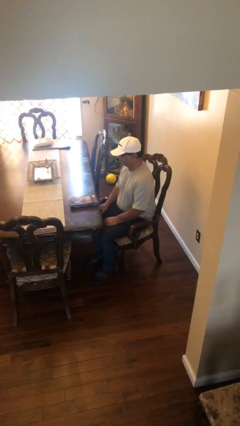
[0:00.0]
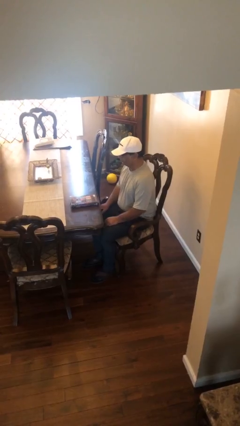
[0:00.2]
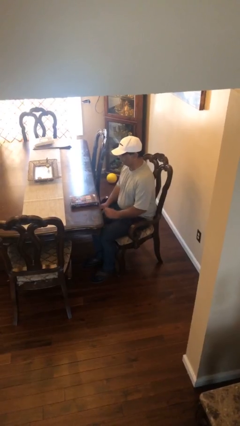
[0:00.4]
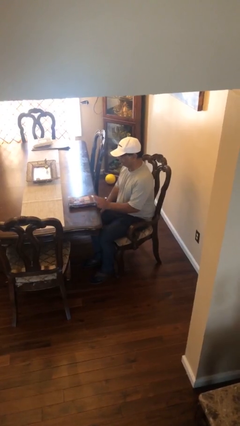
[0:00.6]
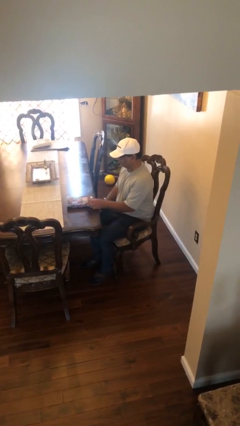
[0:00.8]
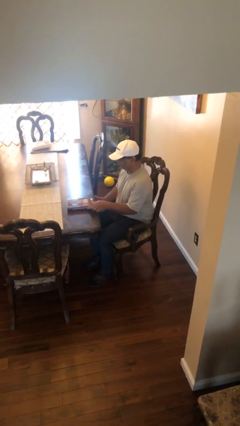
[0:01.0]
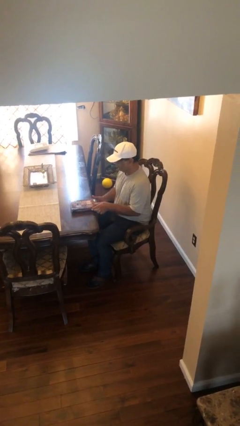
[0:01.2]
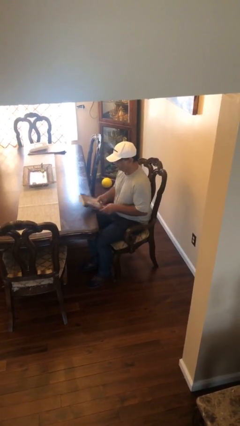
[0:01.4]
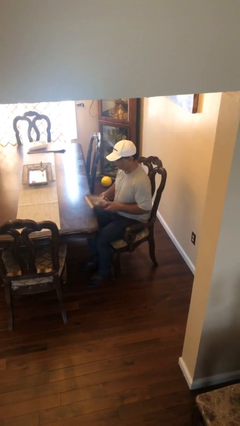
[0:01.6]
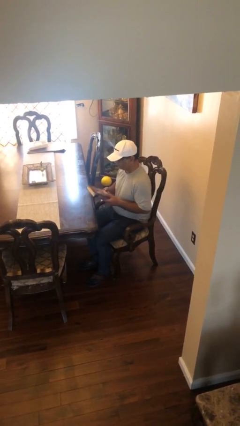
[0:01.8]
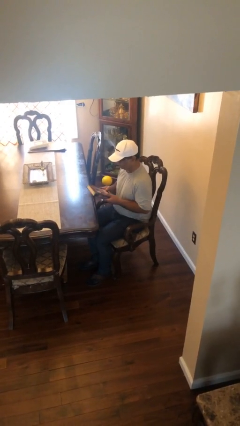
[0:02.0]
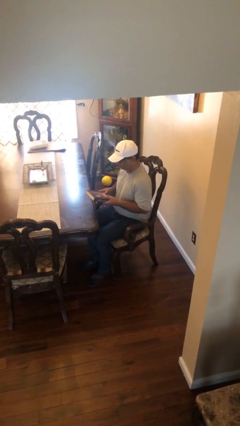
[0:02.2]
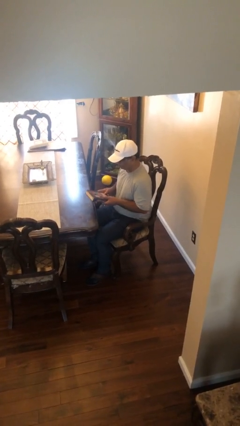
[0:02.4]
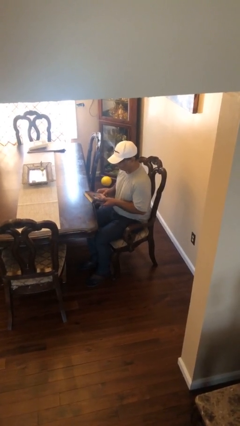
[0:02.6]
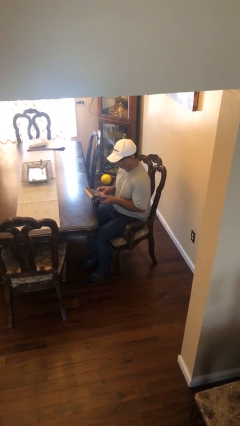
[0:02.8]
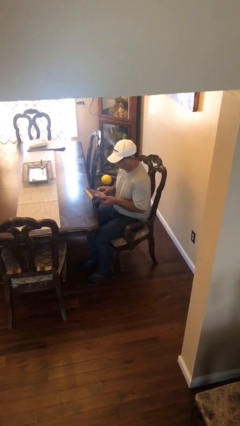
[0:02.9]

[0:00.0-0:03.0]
person picks up object from table

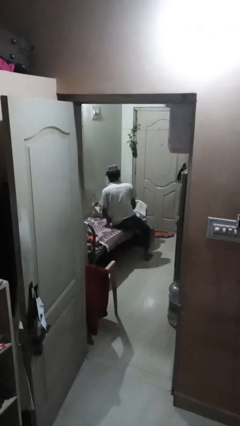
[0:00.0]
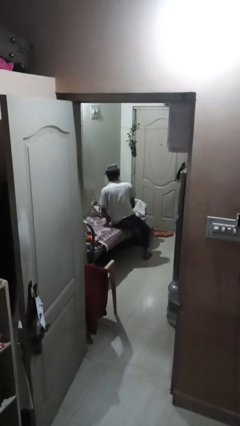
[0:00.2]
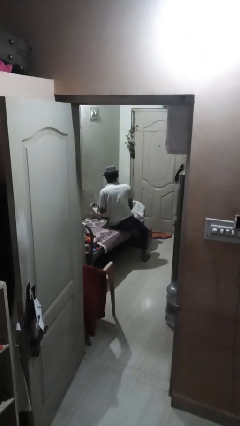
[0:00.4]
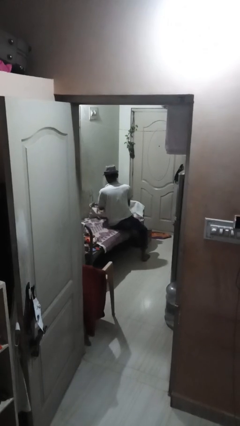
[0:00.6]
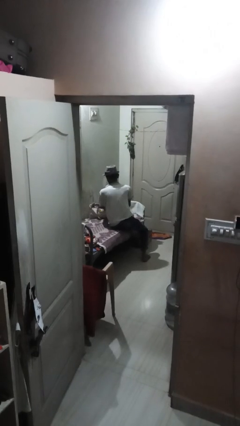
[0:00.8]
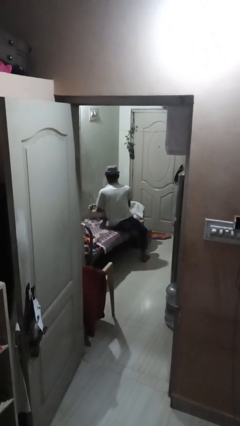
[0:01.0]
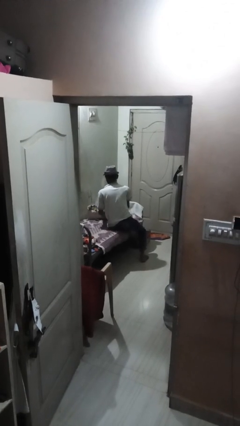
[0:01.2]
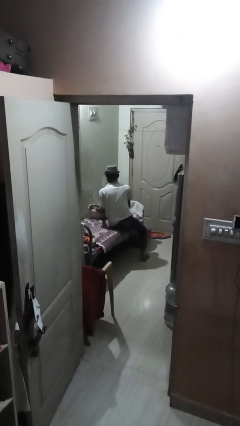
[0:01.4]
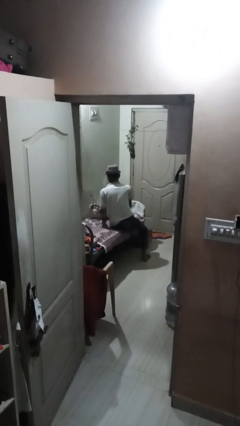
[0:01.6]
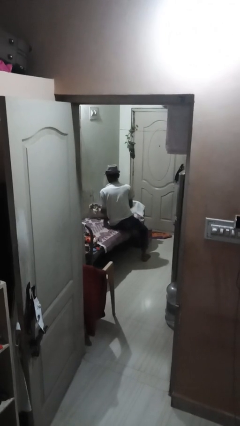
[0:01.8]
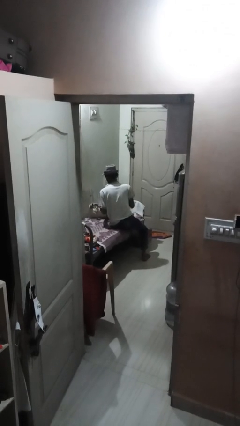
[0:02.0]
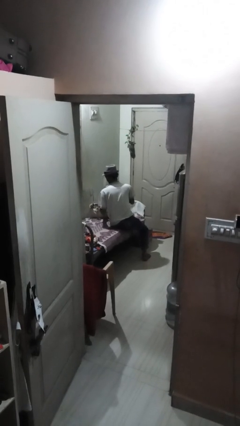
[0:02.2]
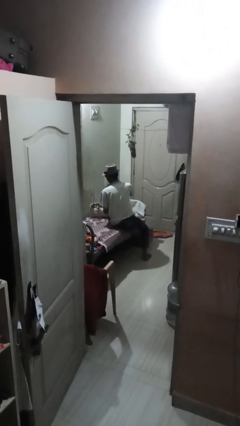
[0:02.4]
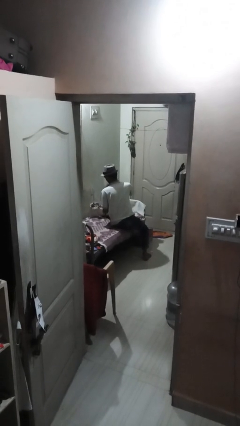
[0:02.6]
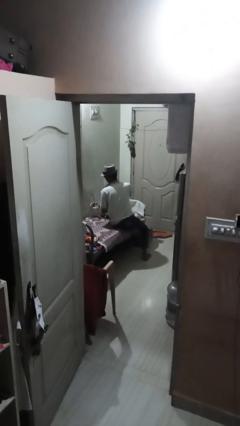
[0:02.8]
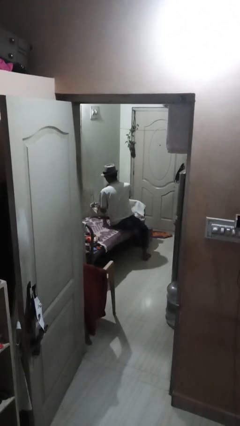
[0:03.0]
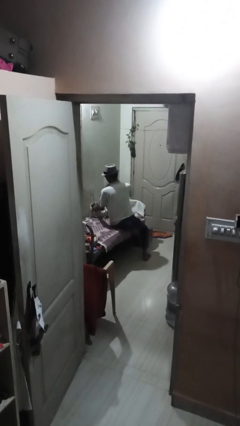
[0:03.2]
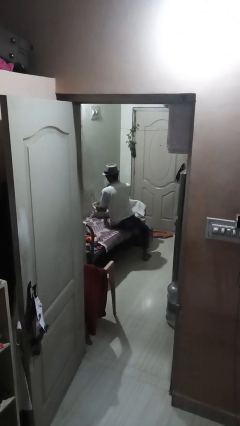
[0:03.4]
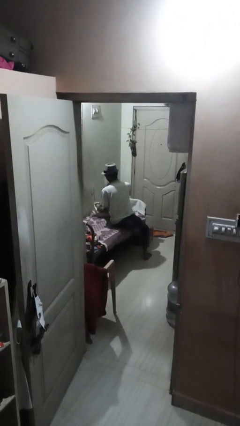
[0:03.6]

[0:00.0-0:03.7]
person searches in bag

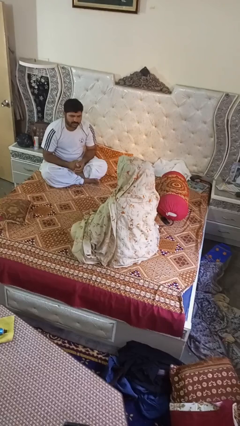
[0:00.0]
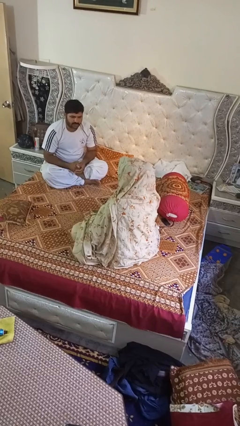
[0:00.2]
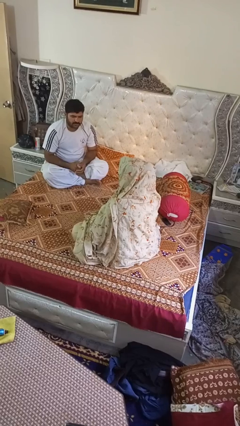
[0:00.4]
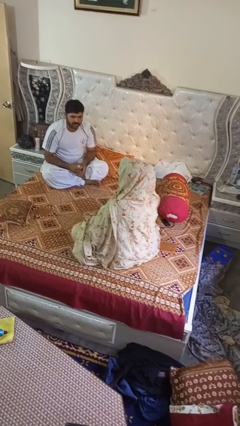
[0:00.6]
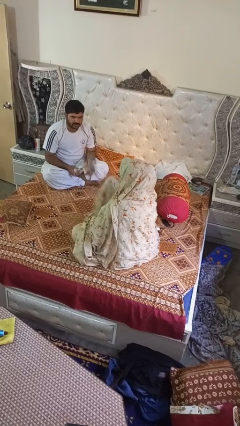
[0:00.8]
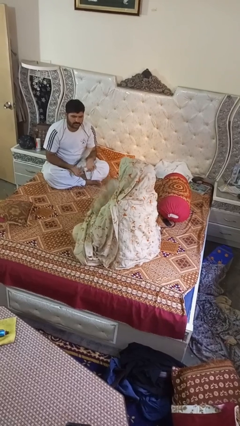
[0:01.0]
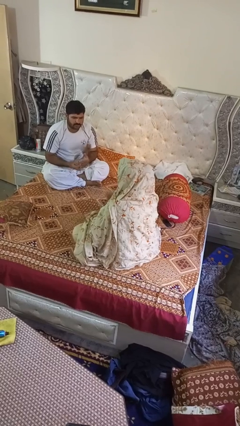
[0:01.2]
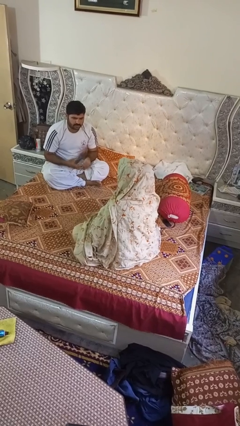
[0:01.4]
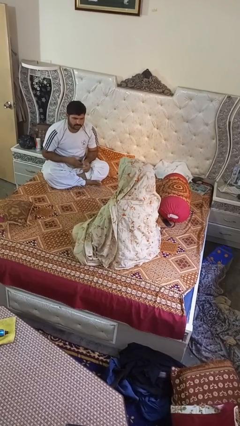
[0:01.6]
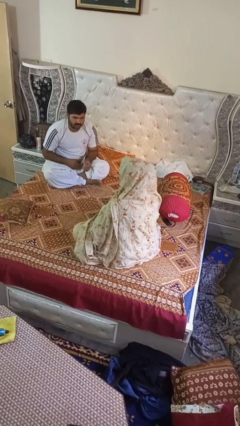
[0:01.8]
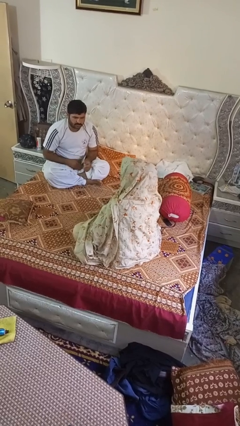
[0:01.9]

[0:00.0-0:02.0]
person throws object to person

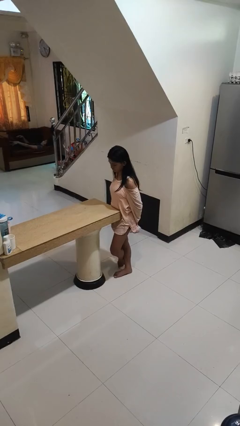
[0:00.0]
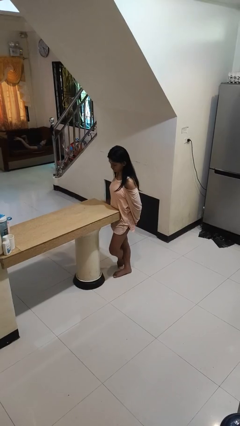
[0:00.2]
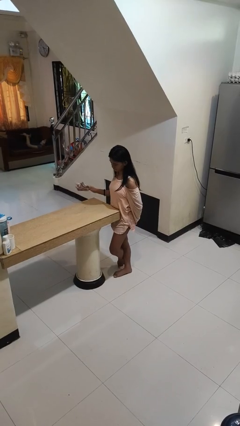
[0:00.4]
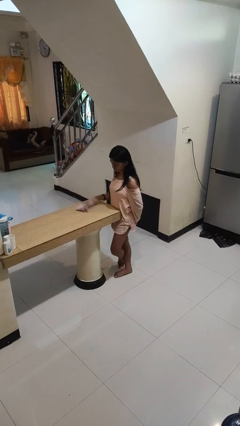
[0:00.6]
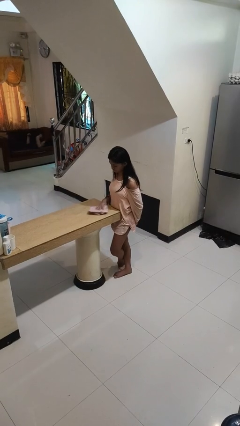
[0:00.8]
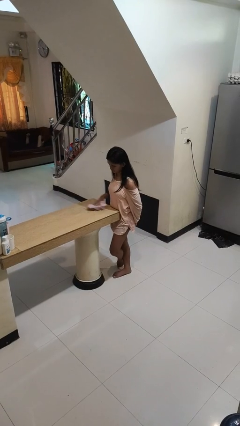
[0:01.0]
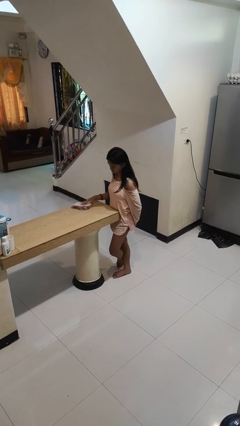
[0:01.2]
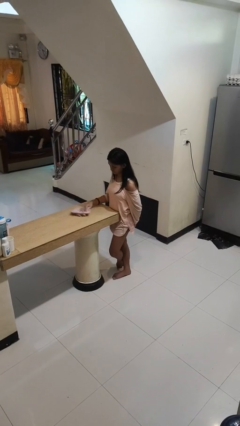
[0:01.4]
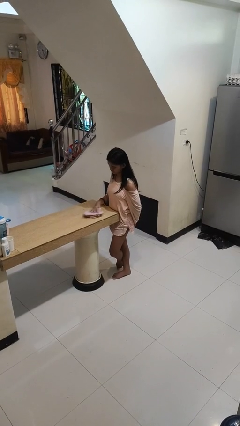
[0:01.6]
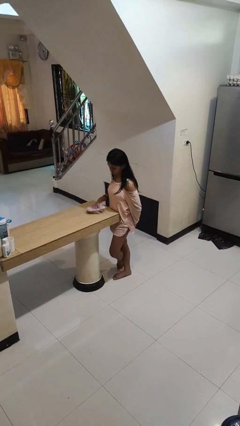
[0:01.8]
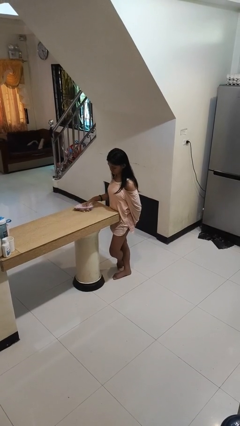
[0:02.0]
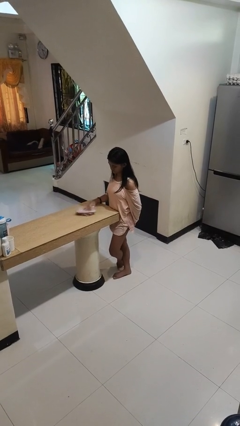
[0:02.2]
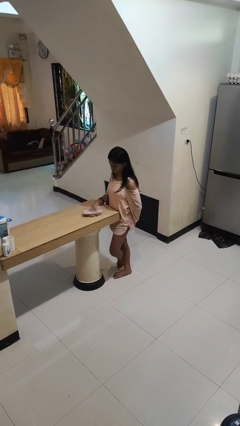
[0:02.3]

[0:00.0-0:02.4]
person cleans table with rag

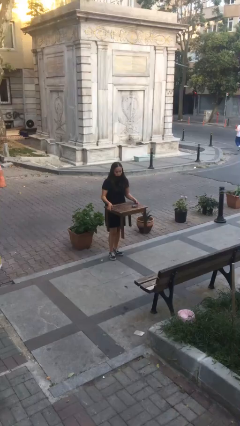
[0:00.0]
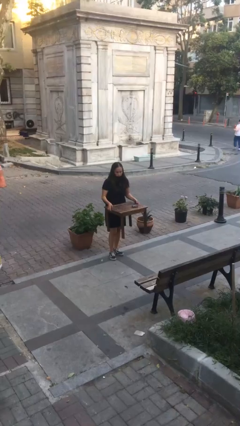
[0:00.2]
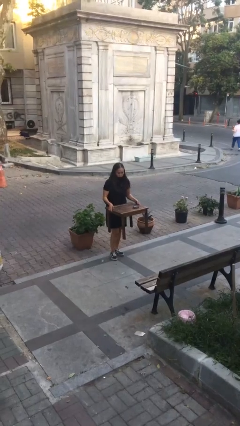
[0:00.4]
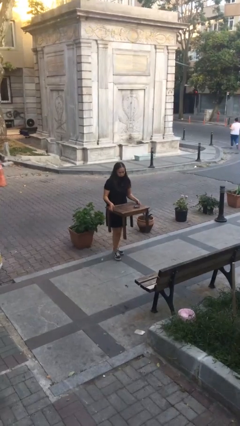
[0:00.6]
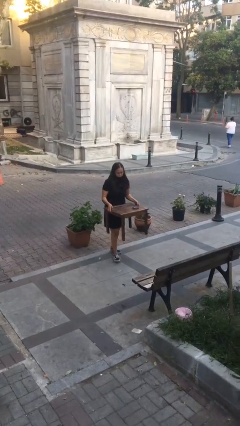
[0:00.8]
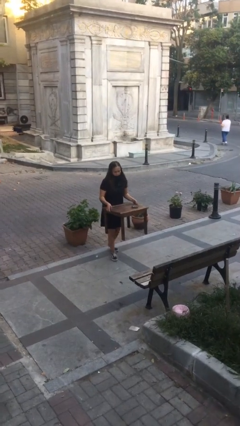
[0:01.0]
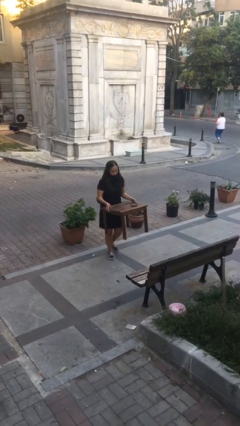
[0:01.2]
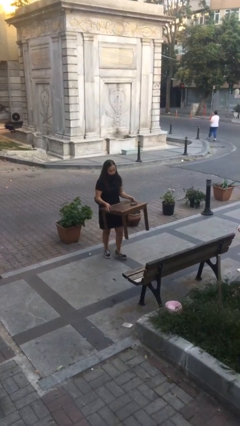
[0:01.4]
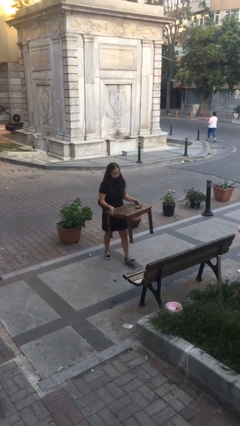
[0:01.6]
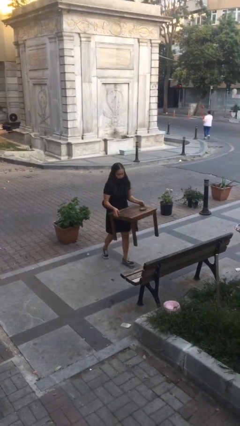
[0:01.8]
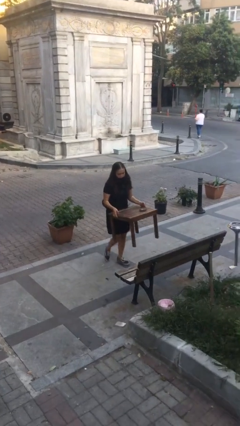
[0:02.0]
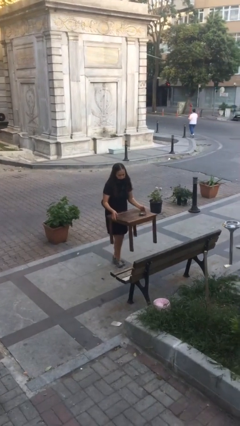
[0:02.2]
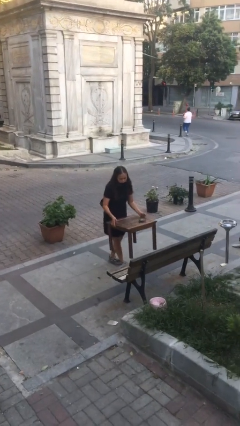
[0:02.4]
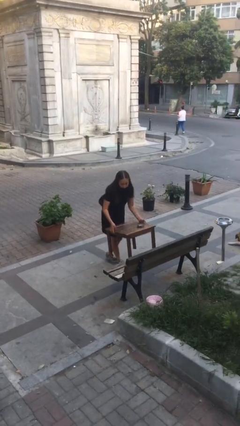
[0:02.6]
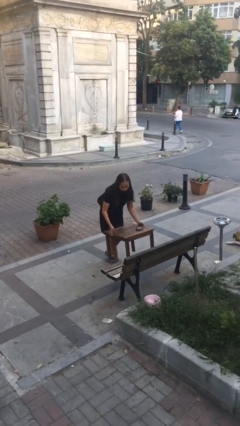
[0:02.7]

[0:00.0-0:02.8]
person carries heavy object

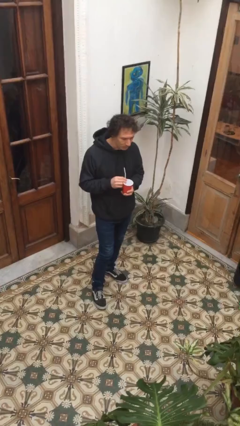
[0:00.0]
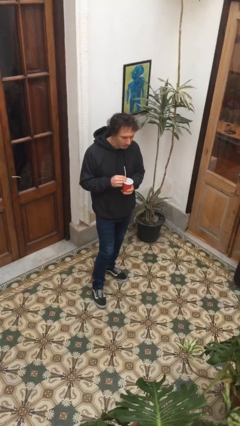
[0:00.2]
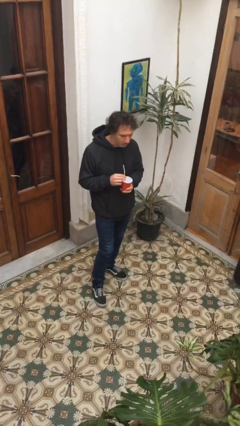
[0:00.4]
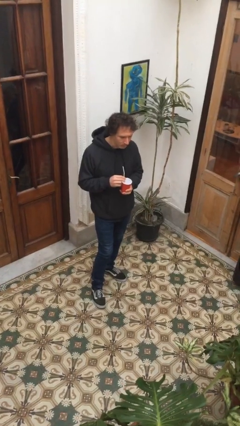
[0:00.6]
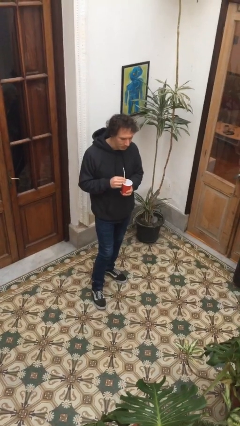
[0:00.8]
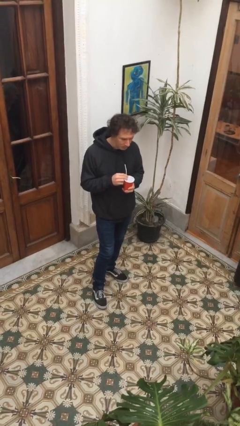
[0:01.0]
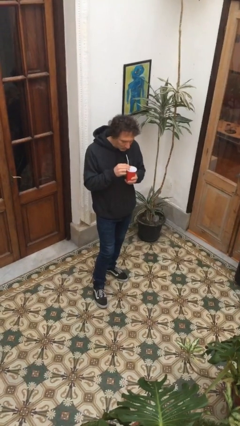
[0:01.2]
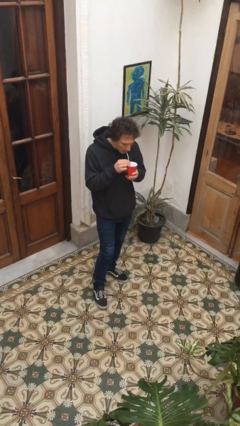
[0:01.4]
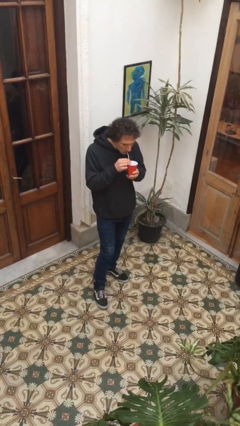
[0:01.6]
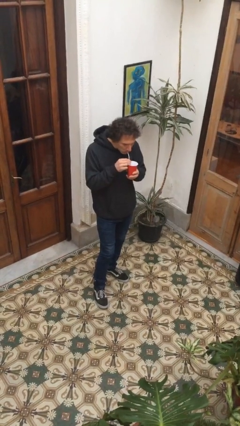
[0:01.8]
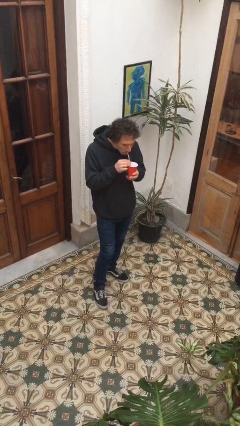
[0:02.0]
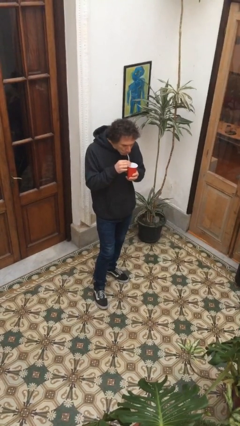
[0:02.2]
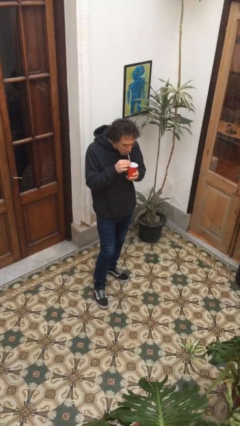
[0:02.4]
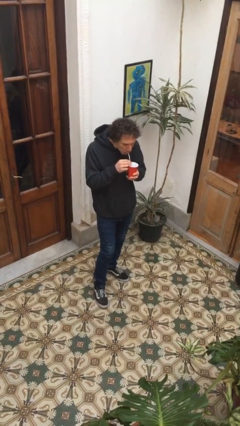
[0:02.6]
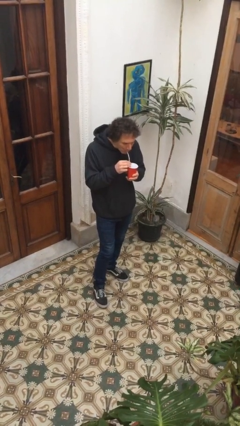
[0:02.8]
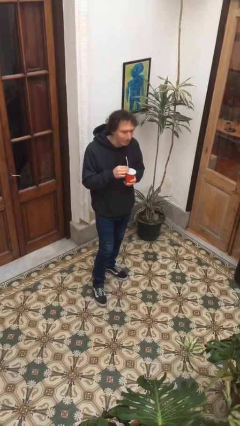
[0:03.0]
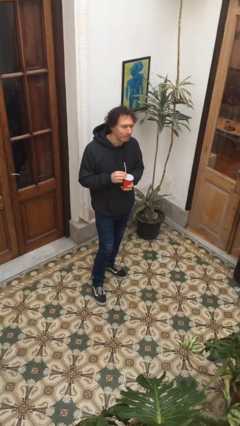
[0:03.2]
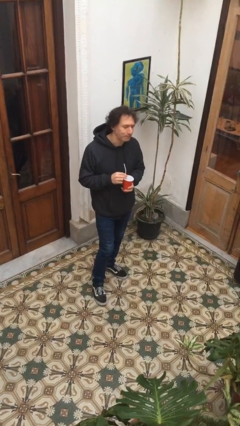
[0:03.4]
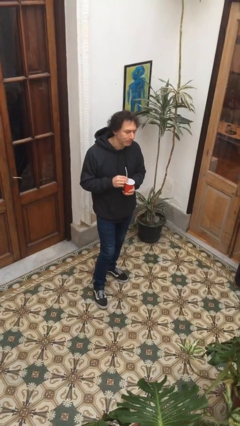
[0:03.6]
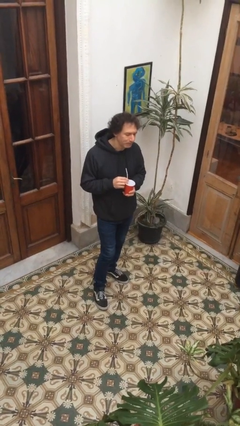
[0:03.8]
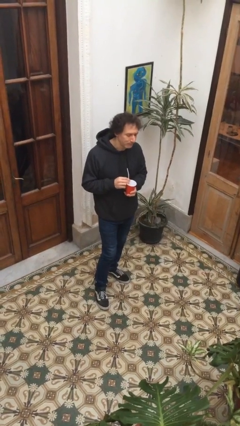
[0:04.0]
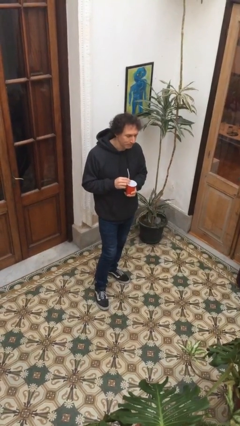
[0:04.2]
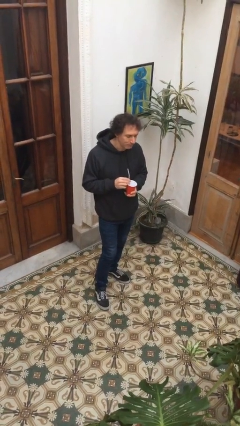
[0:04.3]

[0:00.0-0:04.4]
person drinks from straw
